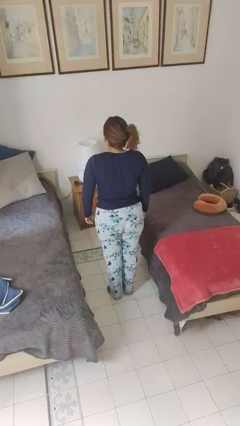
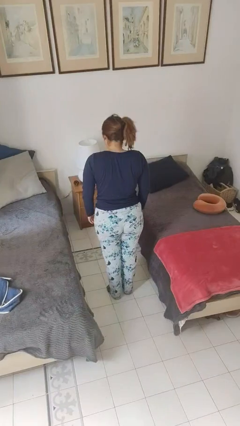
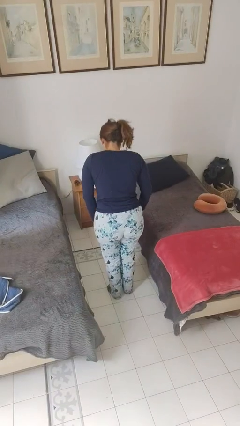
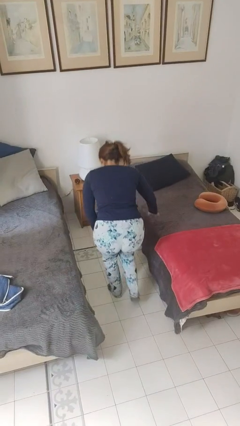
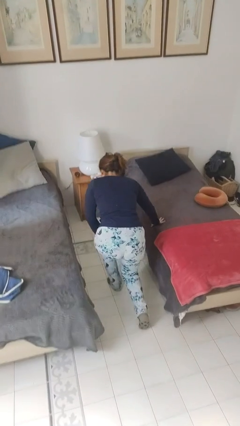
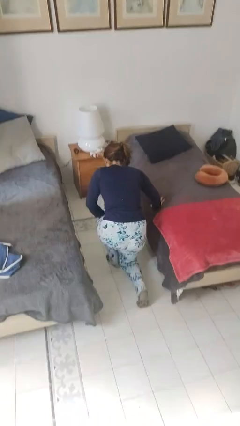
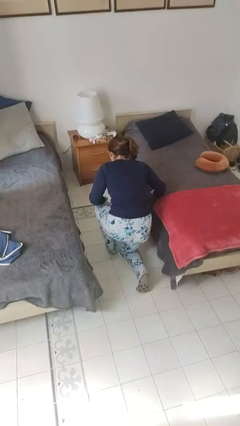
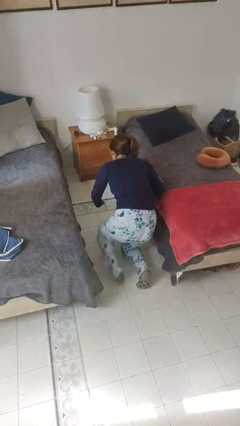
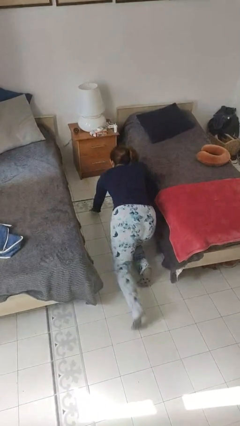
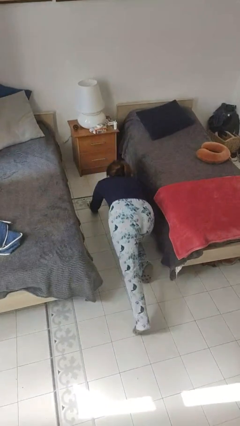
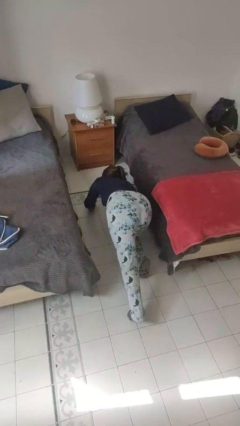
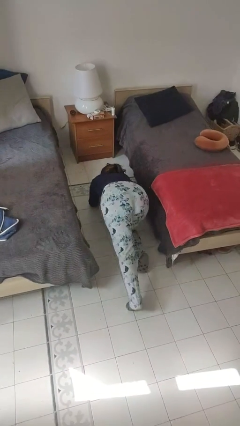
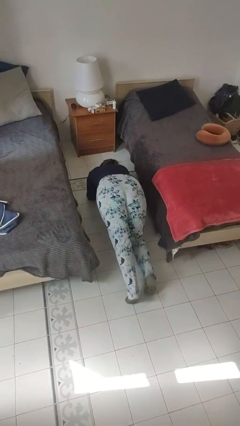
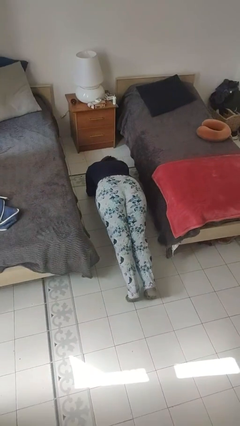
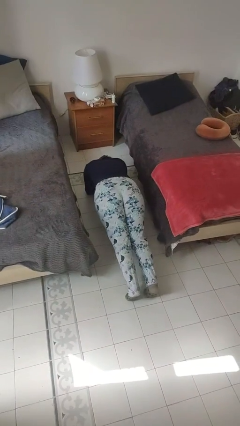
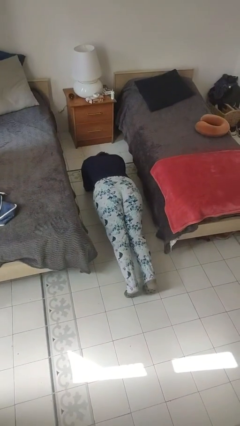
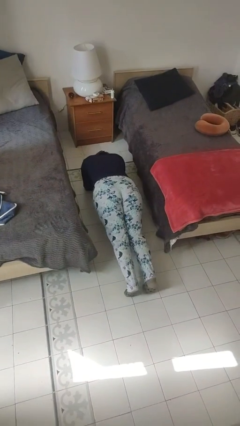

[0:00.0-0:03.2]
person exercises with plank

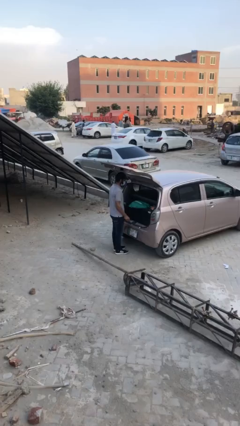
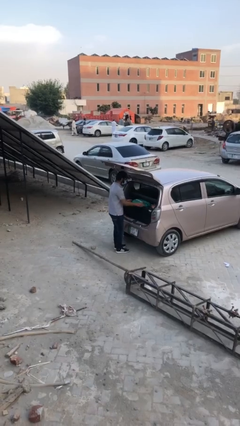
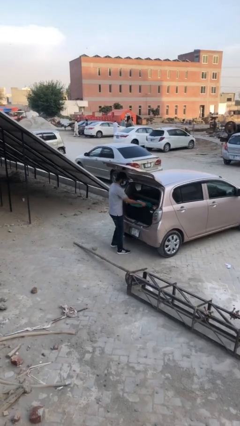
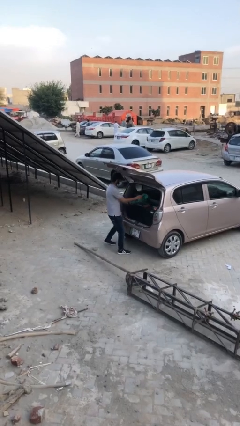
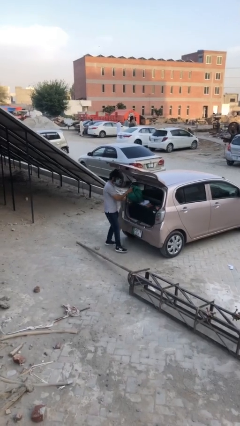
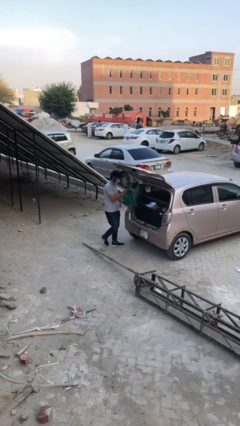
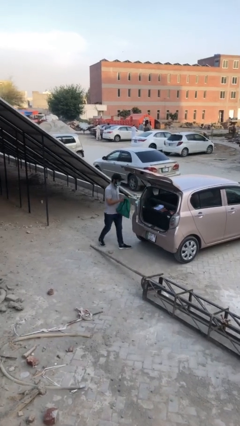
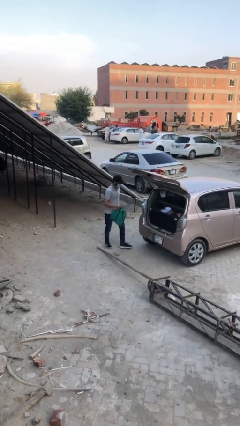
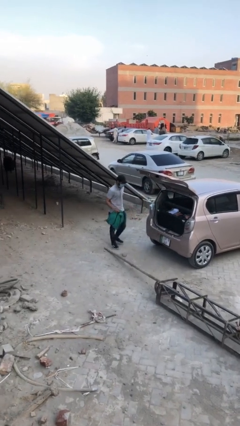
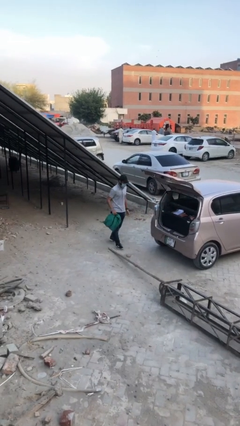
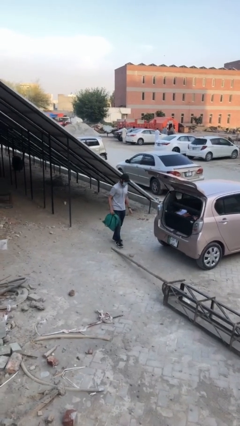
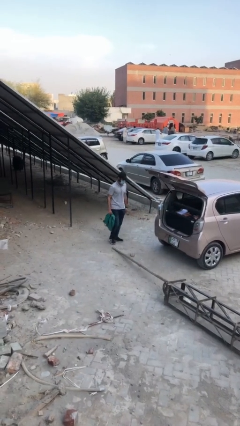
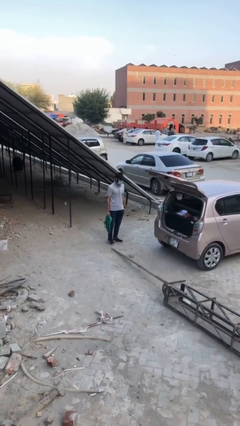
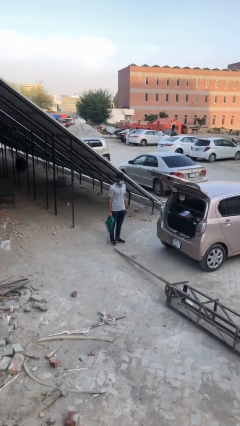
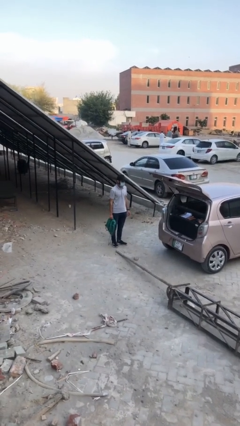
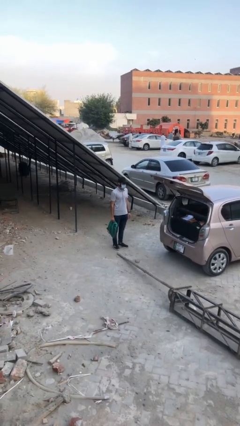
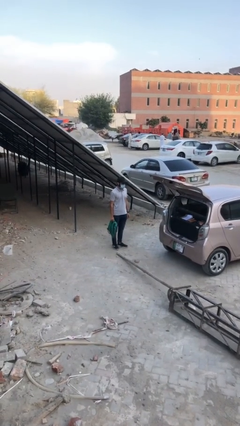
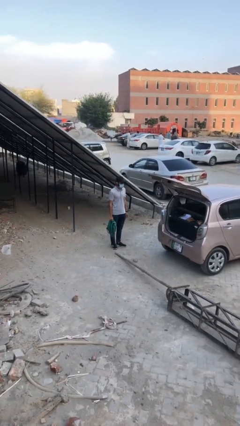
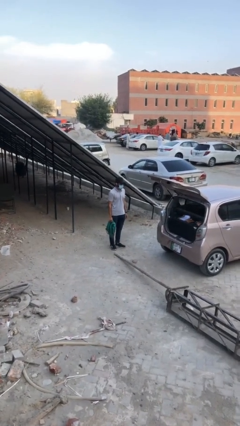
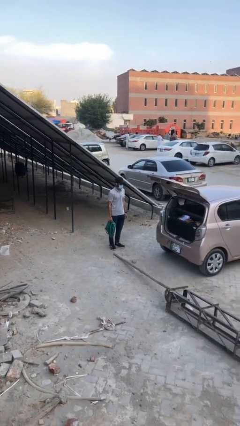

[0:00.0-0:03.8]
person unloads car

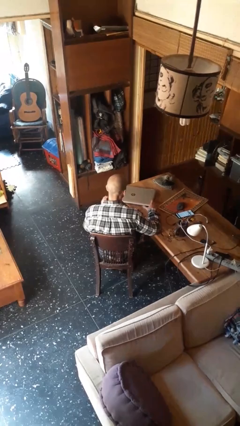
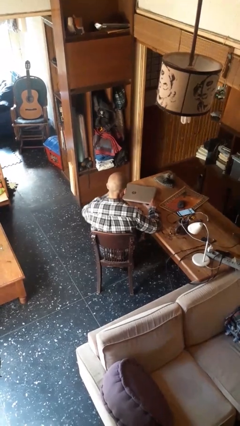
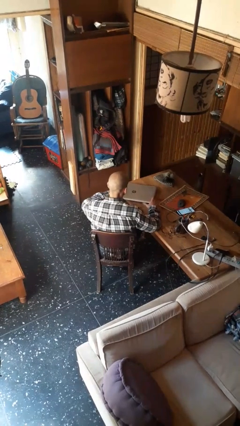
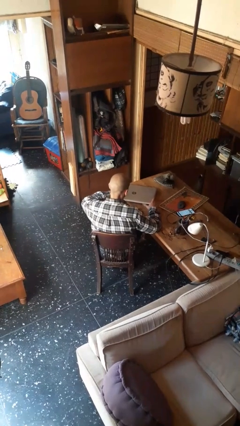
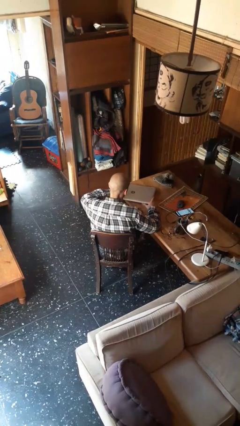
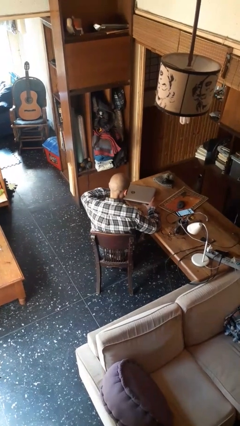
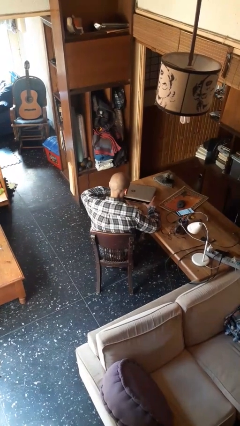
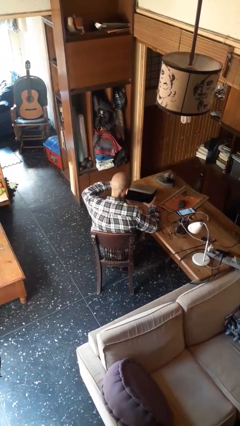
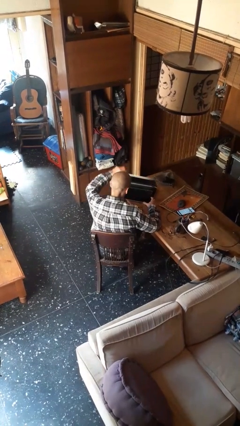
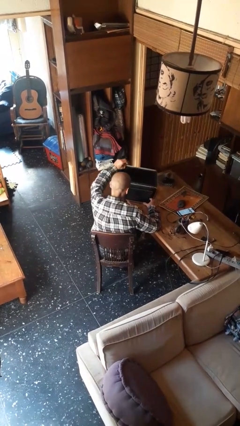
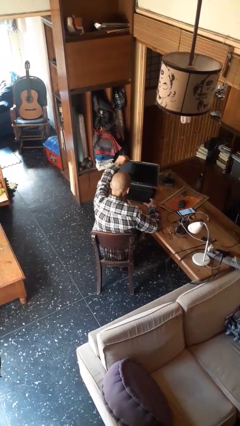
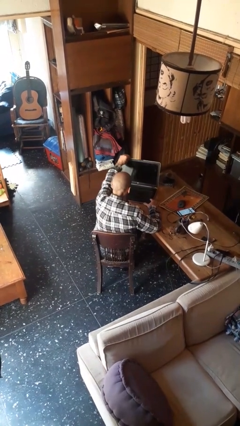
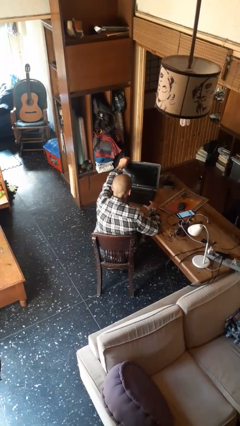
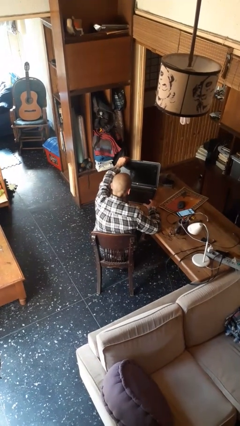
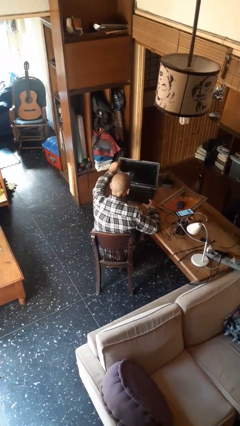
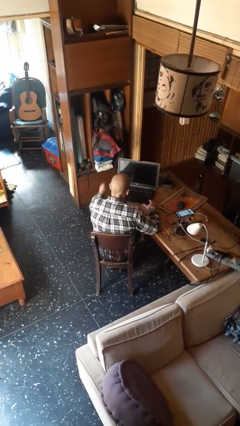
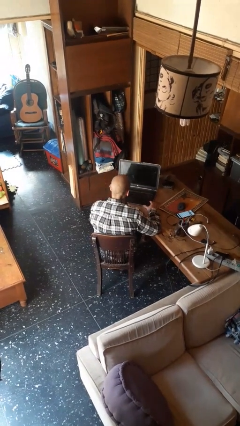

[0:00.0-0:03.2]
person opens laptop

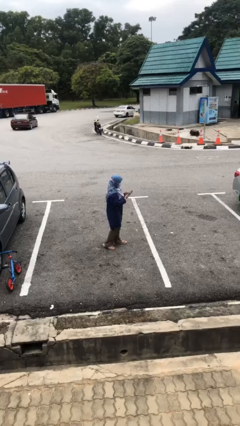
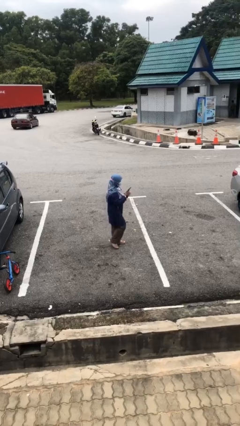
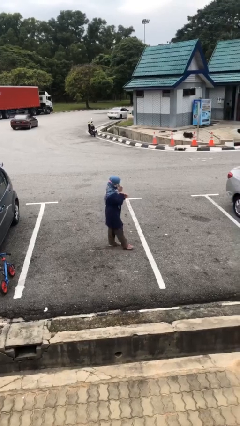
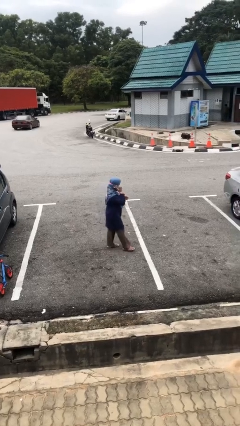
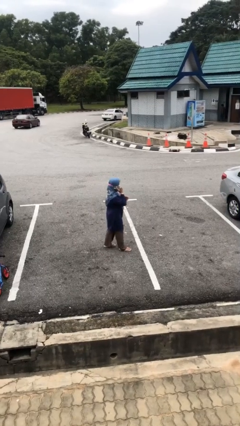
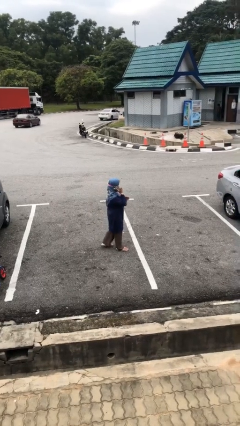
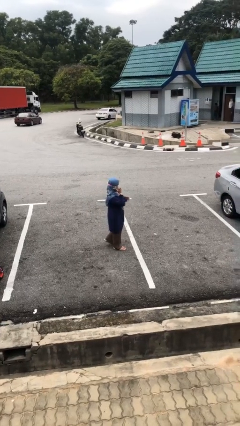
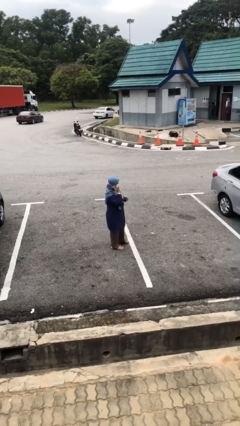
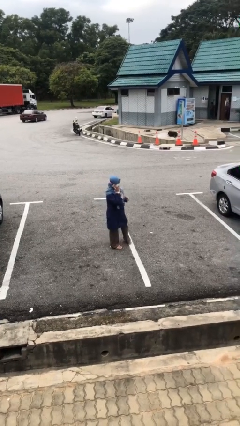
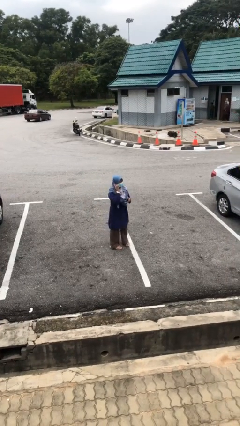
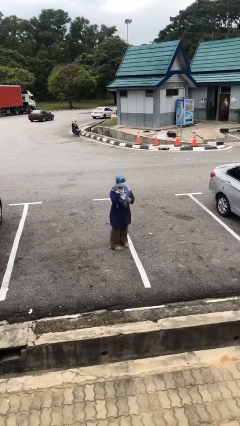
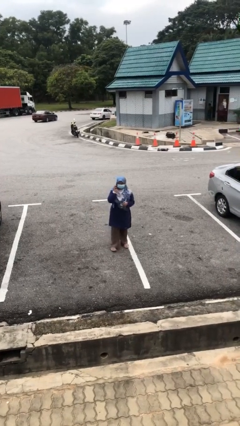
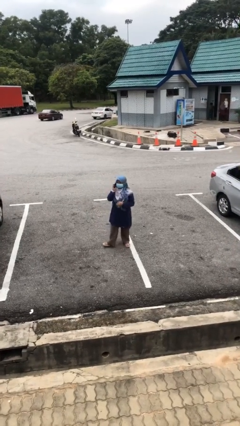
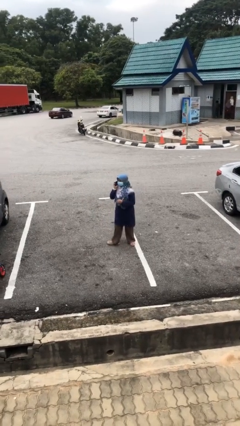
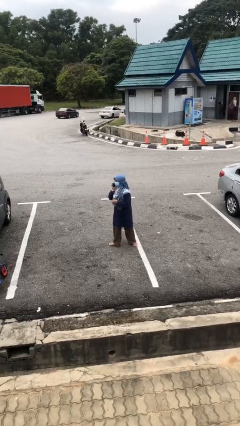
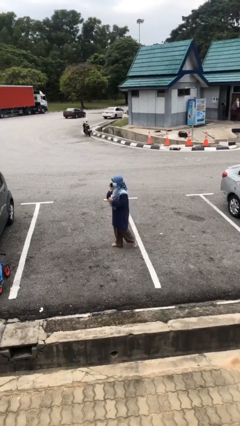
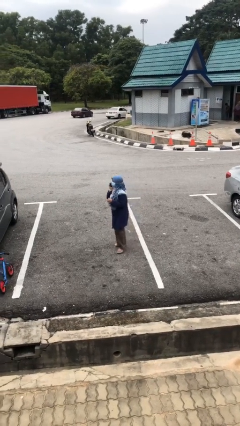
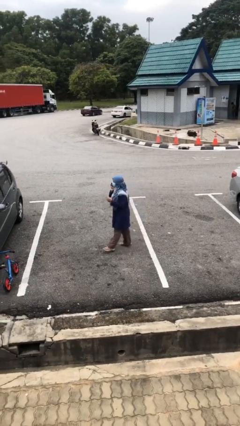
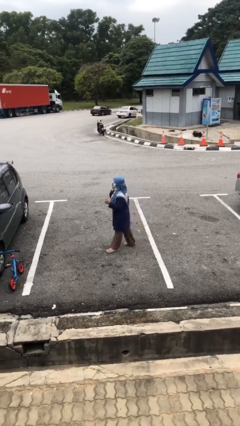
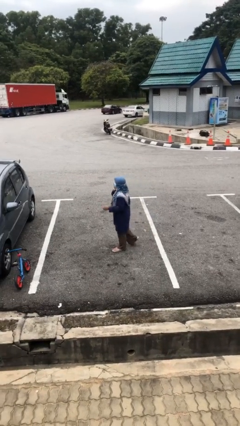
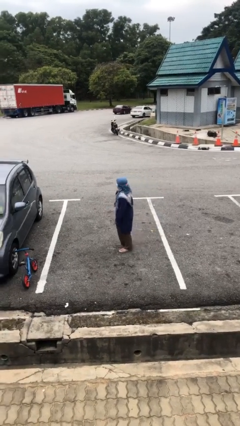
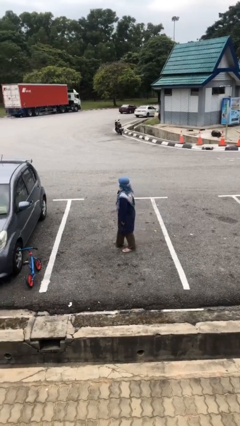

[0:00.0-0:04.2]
person talks on phone

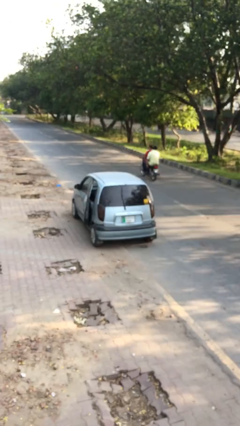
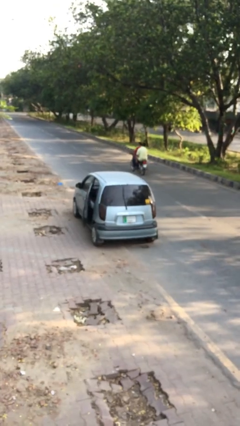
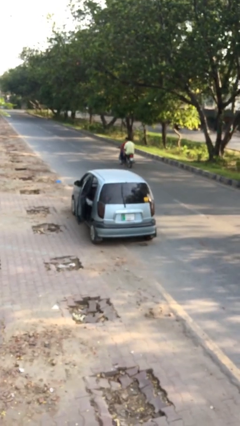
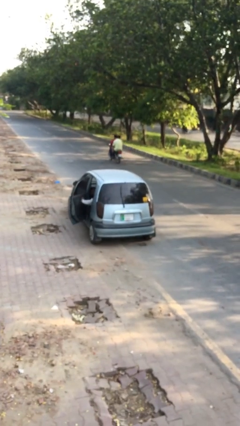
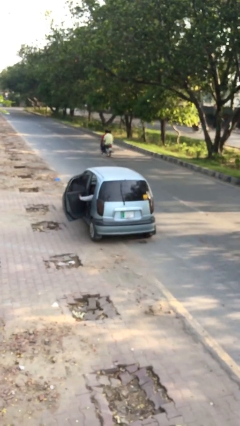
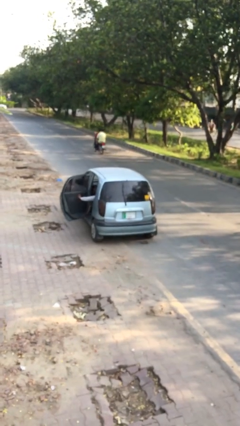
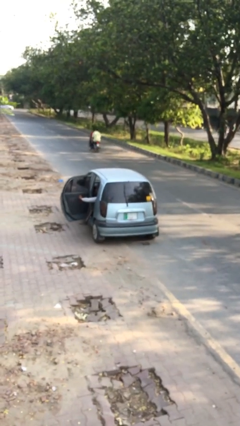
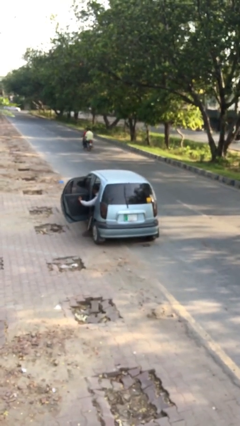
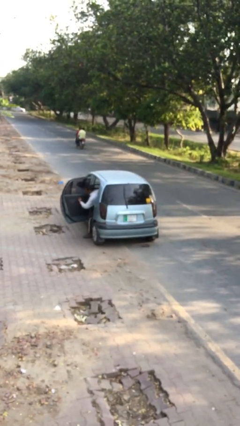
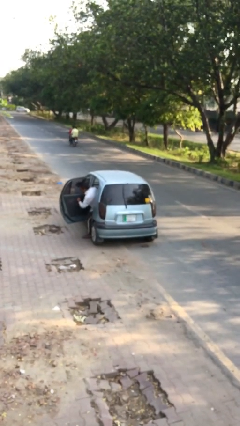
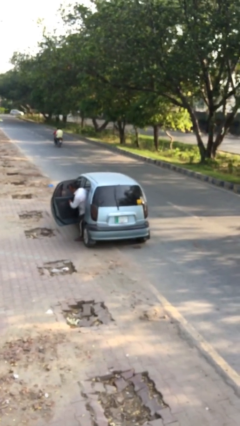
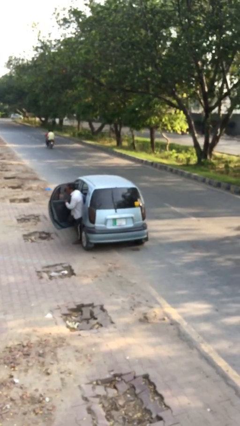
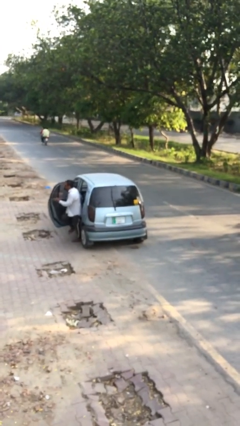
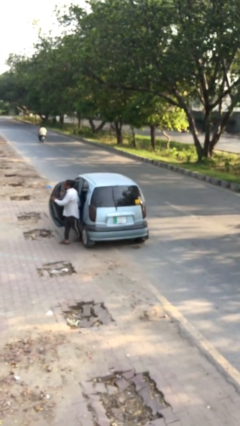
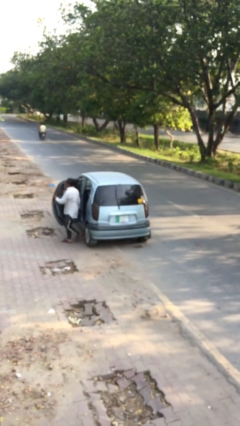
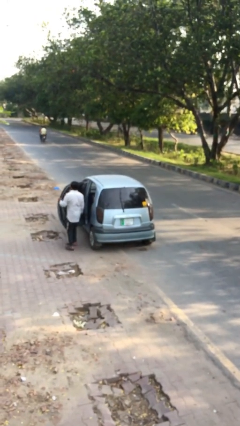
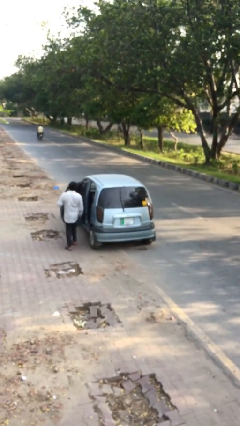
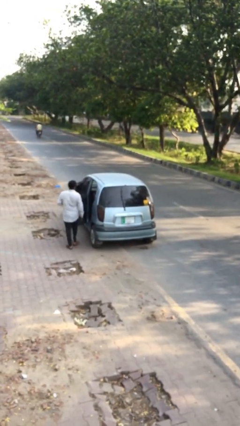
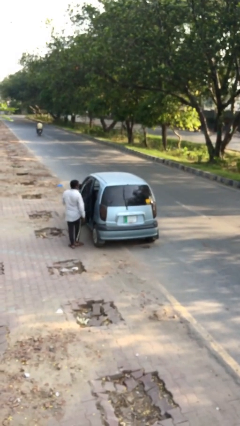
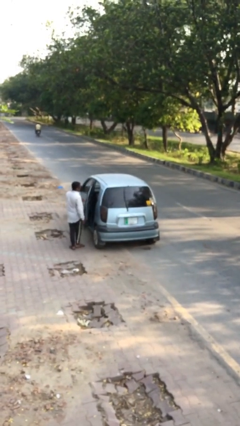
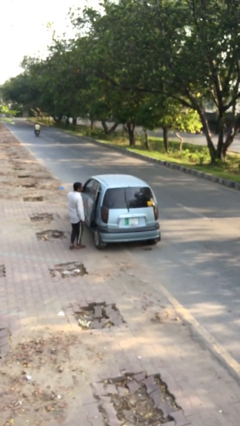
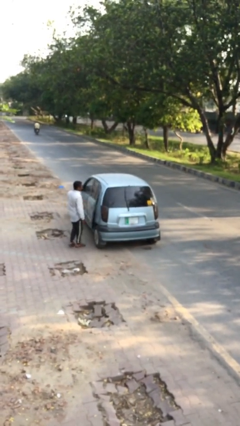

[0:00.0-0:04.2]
car drops off person
